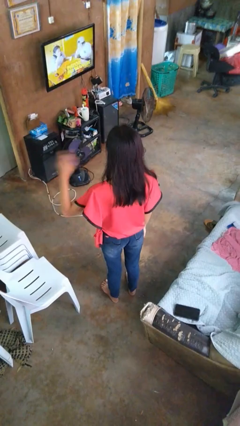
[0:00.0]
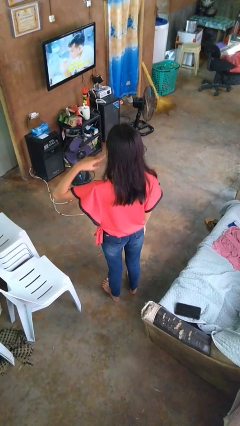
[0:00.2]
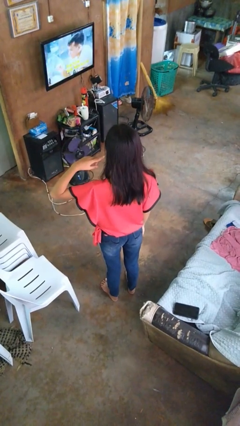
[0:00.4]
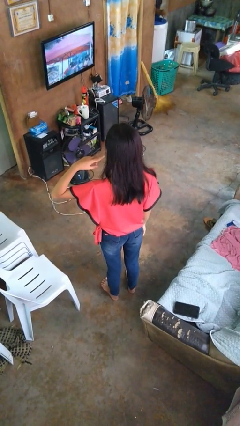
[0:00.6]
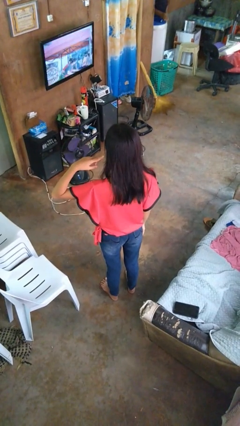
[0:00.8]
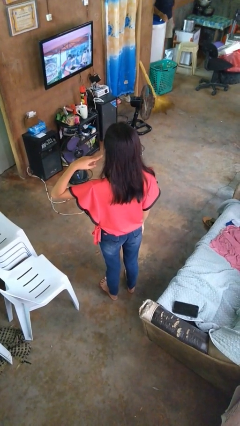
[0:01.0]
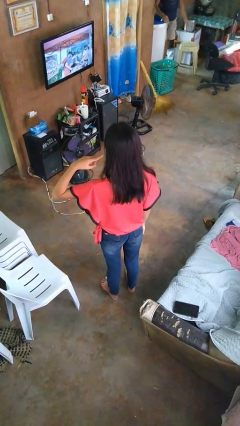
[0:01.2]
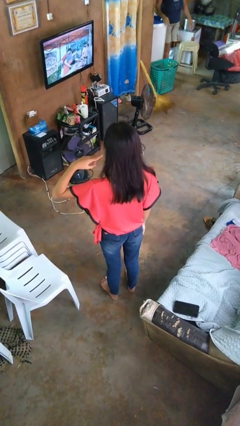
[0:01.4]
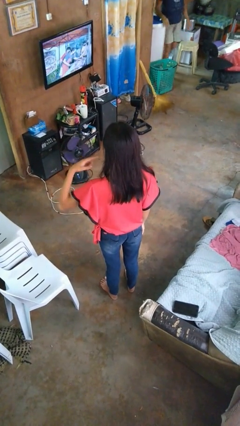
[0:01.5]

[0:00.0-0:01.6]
person gestures listen closely

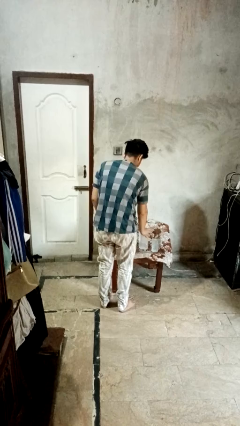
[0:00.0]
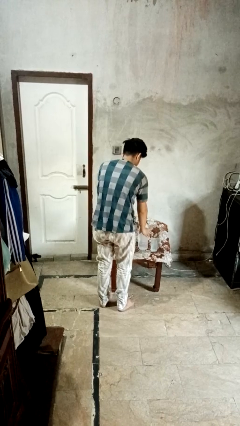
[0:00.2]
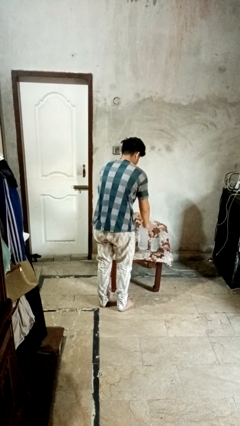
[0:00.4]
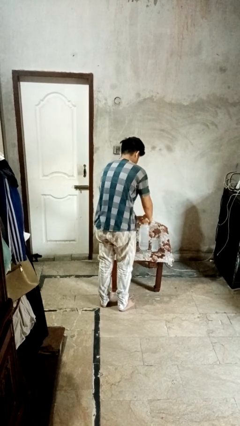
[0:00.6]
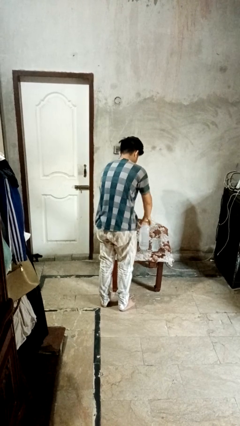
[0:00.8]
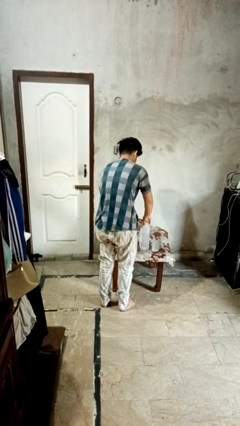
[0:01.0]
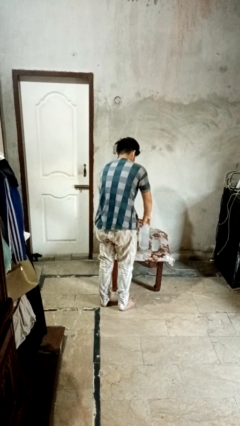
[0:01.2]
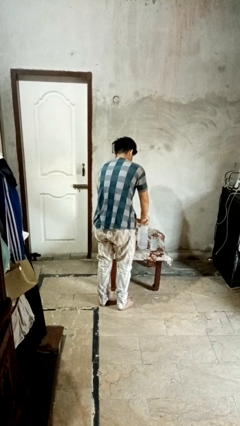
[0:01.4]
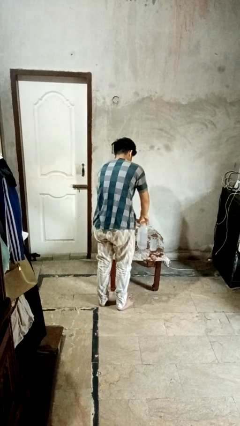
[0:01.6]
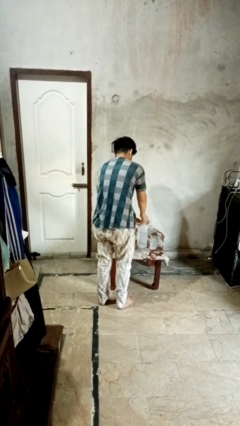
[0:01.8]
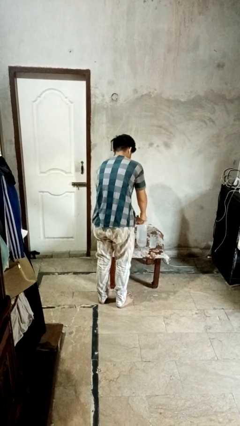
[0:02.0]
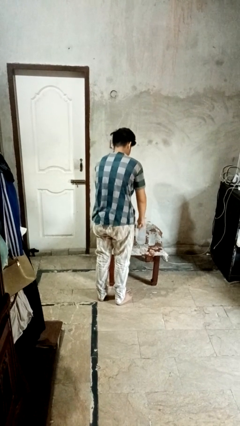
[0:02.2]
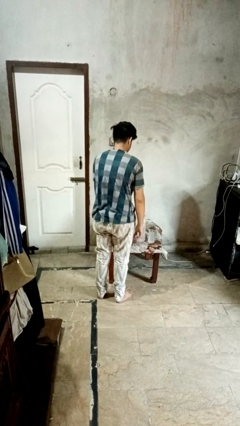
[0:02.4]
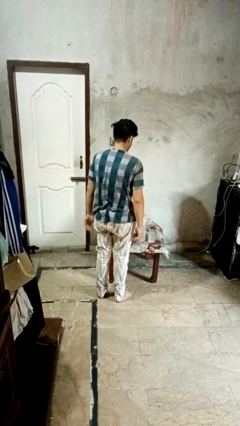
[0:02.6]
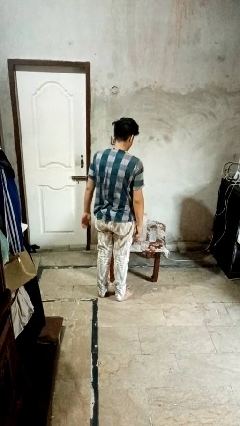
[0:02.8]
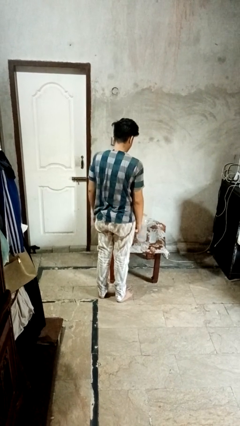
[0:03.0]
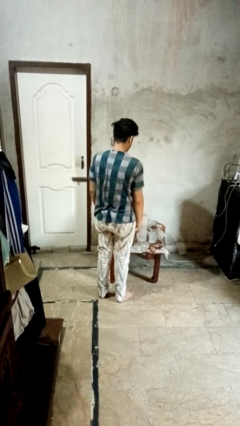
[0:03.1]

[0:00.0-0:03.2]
person screws lid to bottle

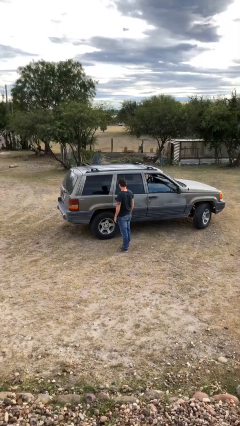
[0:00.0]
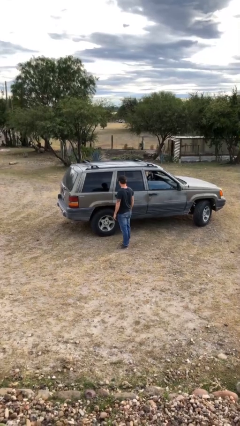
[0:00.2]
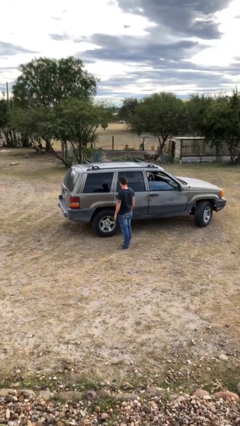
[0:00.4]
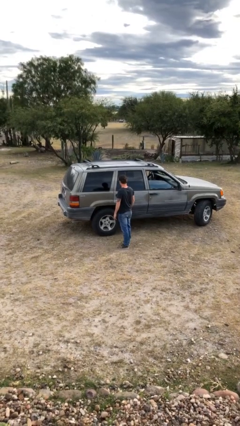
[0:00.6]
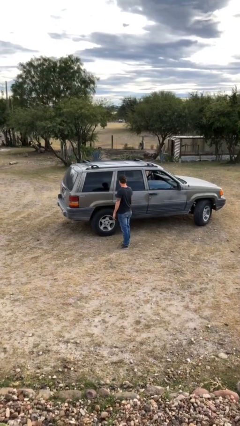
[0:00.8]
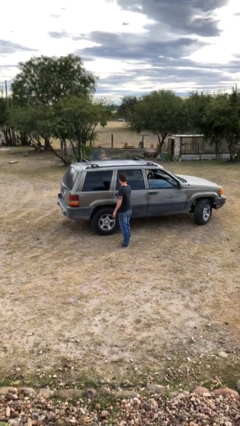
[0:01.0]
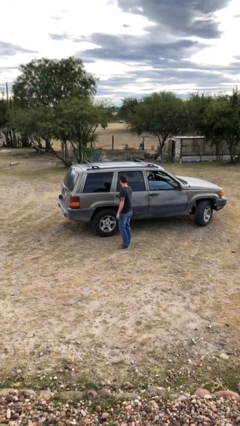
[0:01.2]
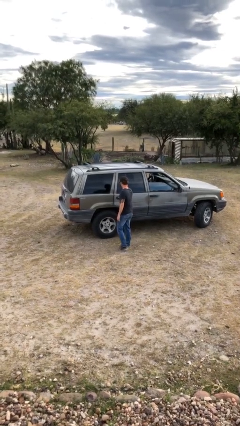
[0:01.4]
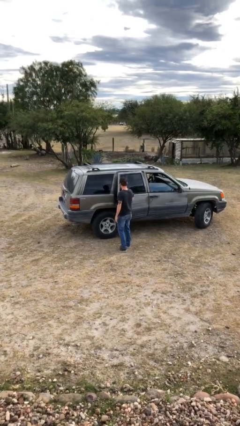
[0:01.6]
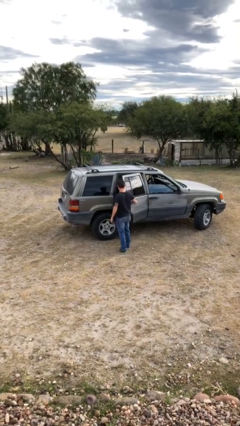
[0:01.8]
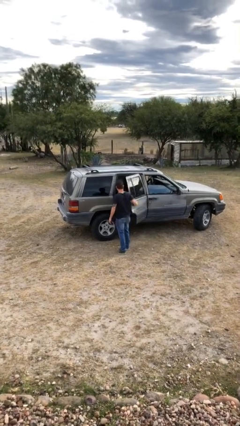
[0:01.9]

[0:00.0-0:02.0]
person opens car door

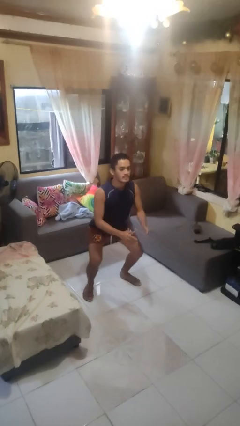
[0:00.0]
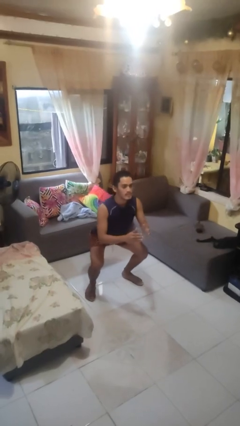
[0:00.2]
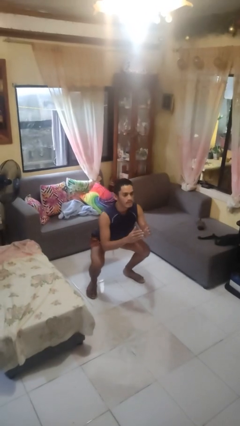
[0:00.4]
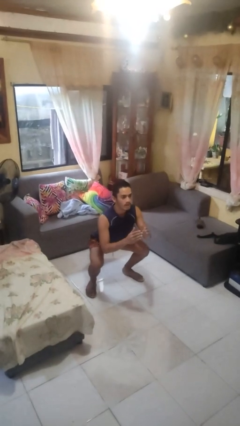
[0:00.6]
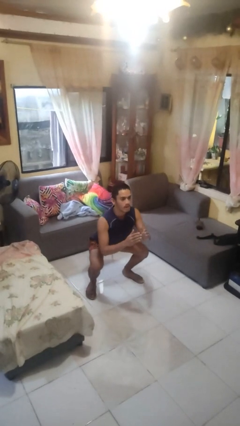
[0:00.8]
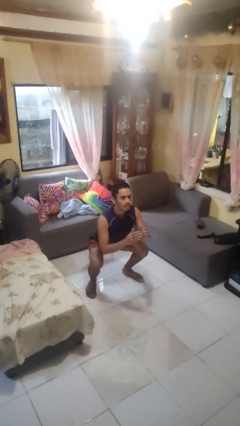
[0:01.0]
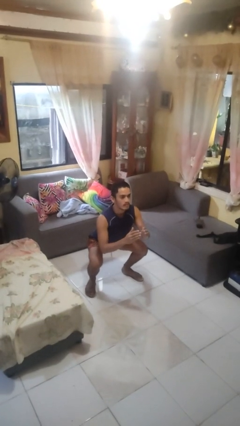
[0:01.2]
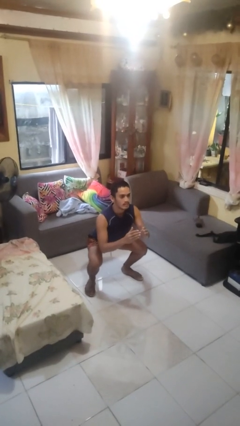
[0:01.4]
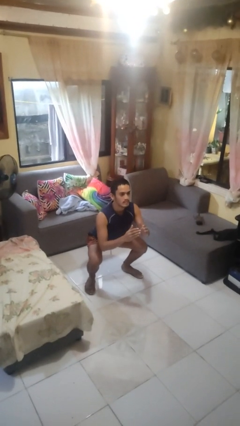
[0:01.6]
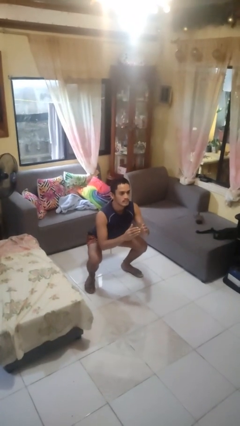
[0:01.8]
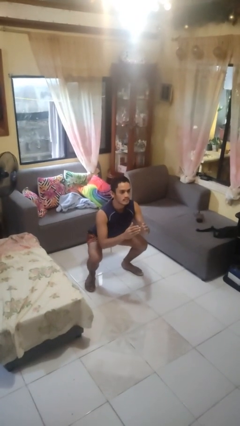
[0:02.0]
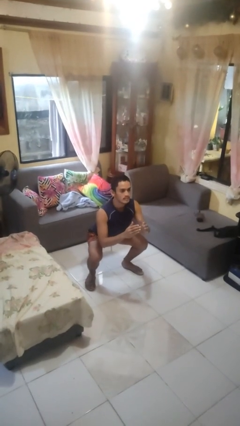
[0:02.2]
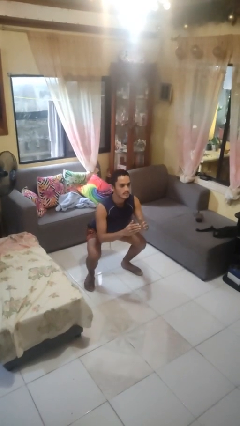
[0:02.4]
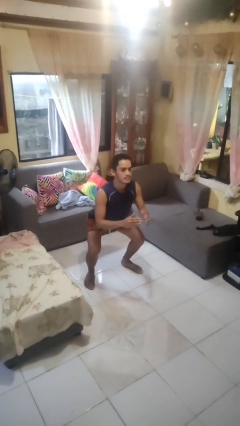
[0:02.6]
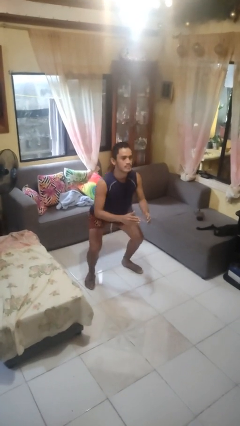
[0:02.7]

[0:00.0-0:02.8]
person squats

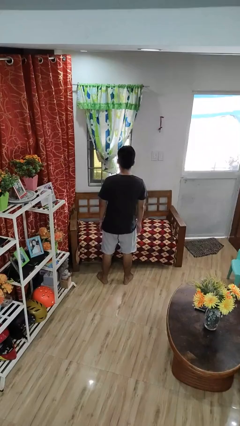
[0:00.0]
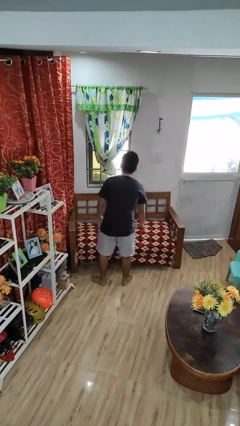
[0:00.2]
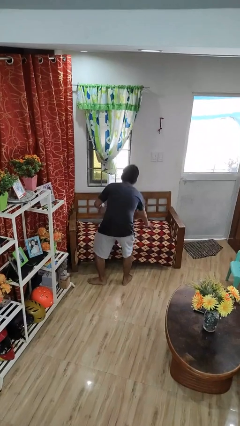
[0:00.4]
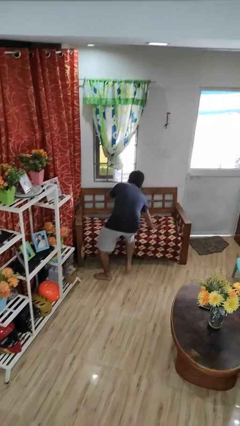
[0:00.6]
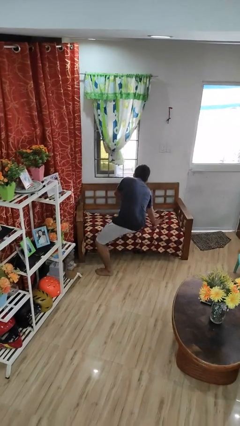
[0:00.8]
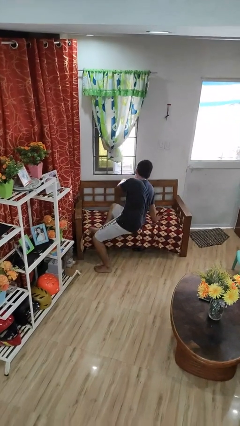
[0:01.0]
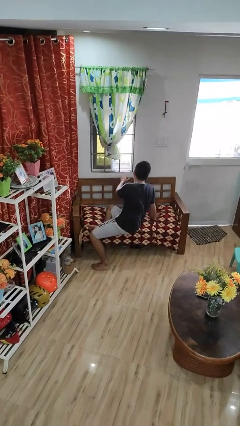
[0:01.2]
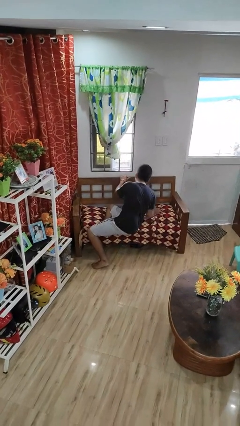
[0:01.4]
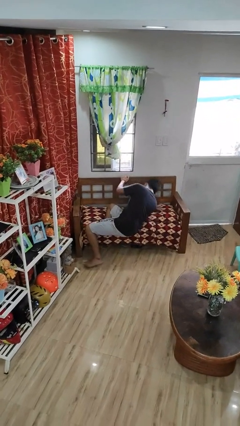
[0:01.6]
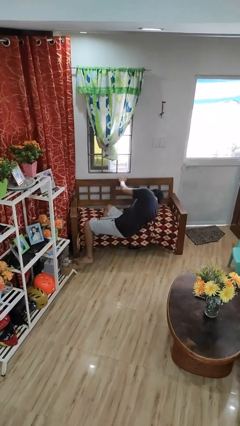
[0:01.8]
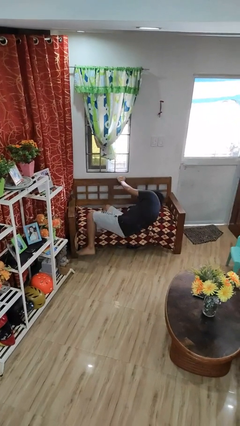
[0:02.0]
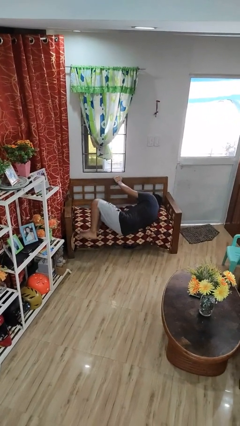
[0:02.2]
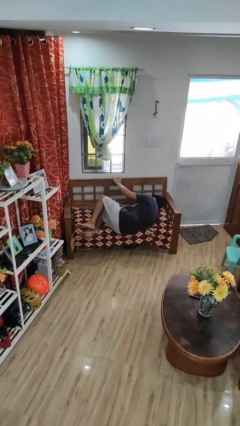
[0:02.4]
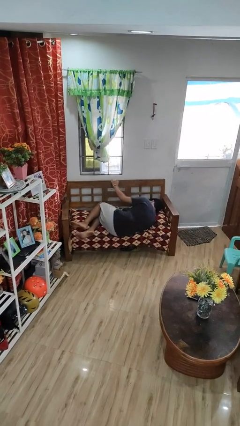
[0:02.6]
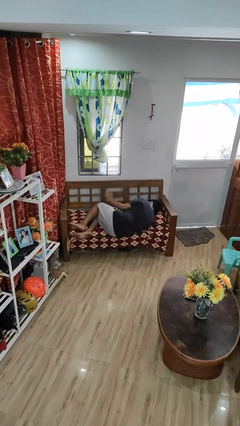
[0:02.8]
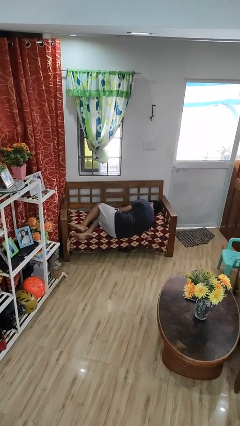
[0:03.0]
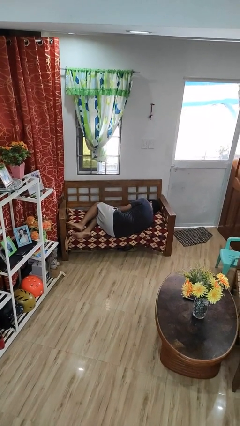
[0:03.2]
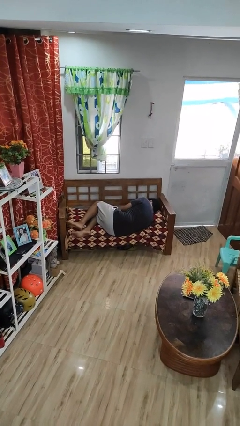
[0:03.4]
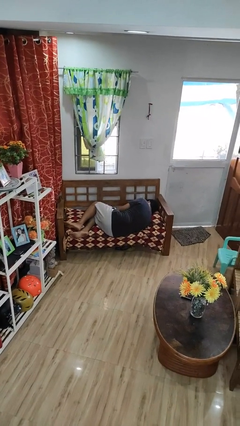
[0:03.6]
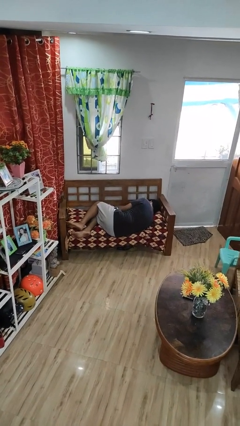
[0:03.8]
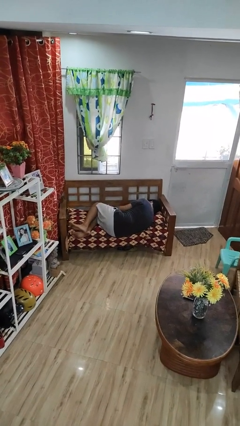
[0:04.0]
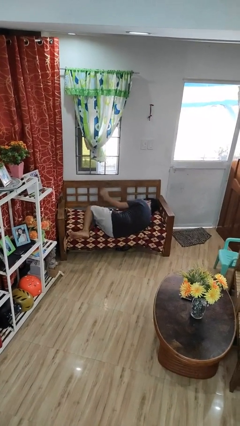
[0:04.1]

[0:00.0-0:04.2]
person lies down on couch

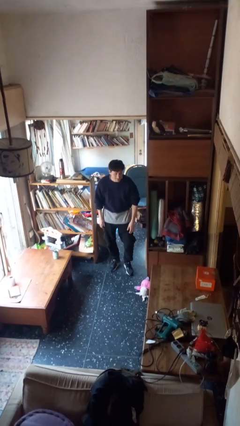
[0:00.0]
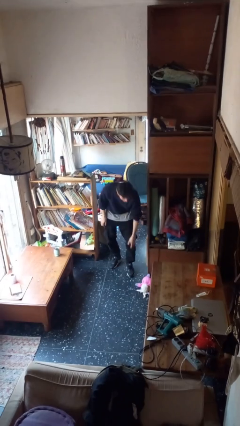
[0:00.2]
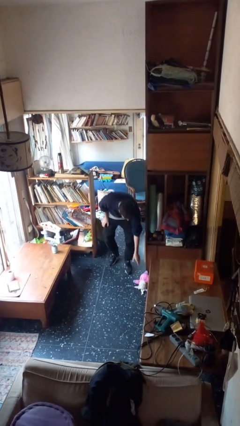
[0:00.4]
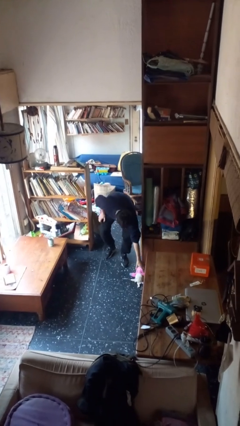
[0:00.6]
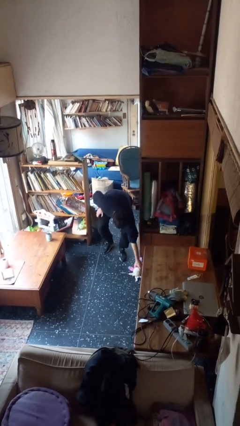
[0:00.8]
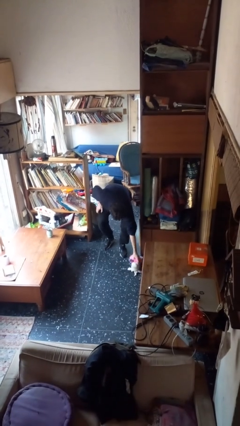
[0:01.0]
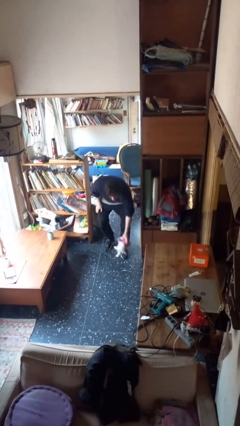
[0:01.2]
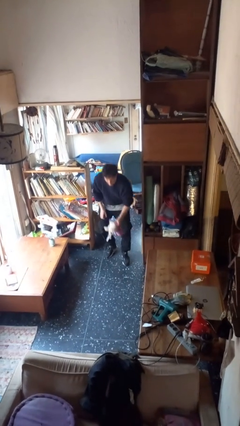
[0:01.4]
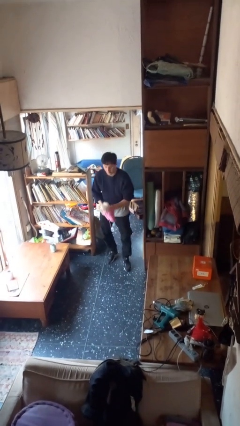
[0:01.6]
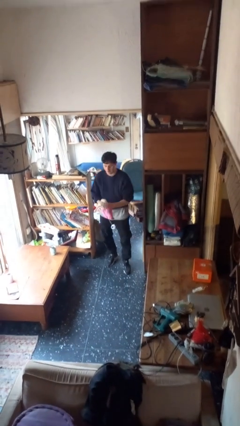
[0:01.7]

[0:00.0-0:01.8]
person picks up object from floor

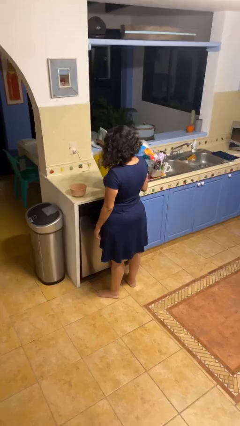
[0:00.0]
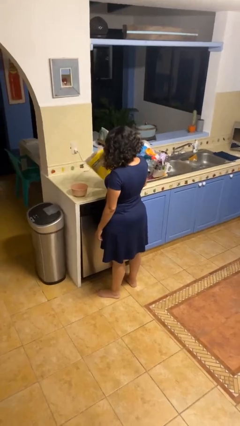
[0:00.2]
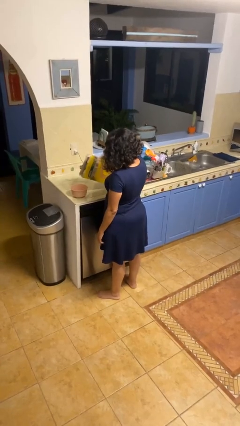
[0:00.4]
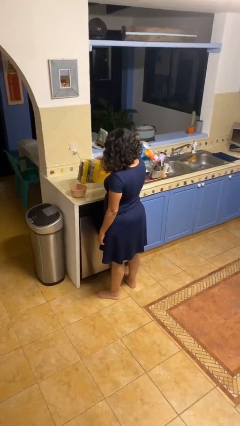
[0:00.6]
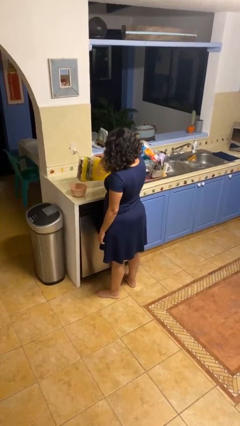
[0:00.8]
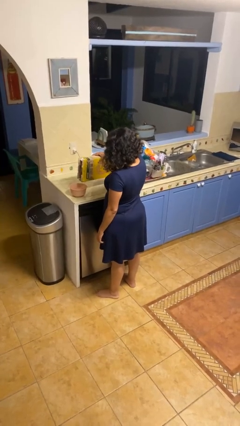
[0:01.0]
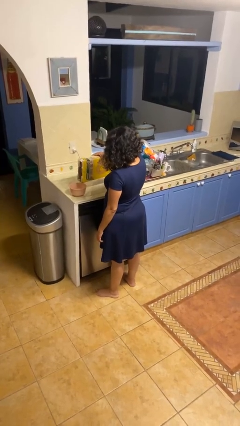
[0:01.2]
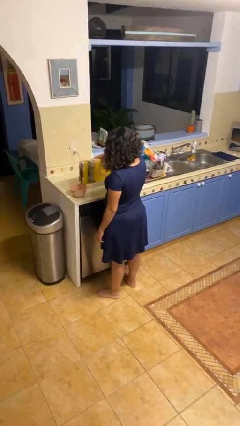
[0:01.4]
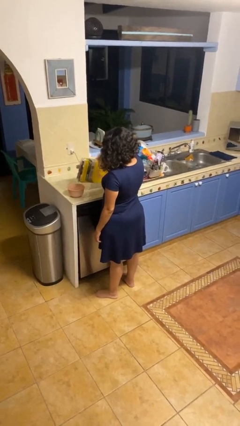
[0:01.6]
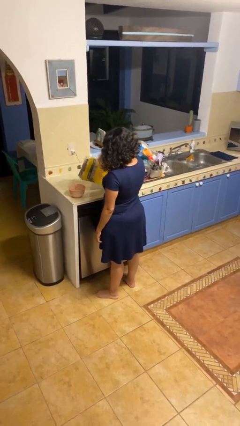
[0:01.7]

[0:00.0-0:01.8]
person pours into bowl
